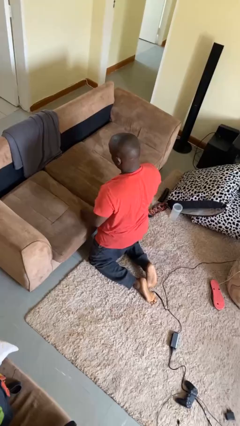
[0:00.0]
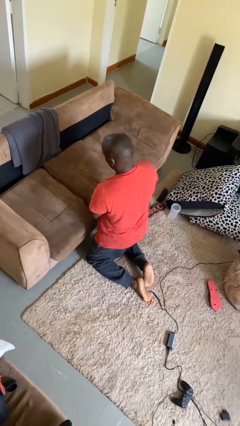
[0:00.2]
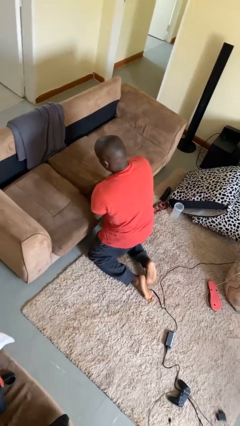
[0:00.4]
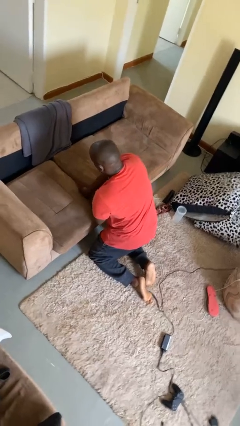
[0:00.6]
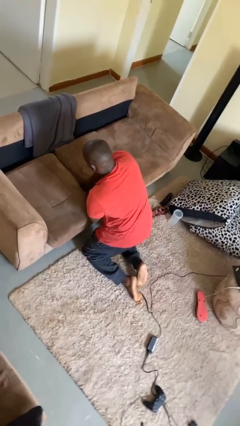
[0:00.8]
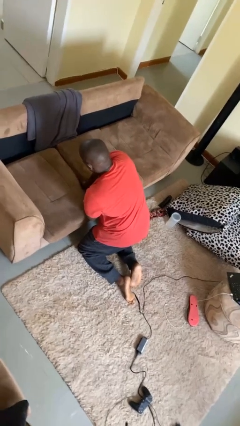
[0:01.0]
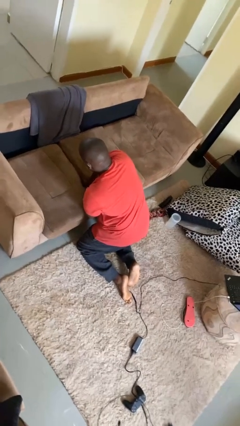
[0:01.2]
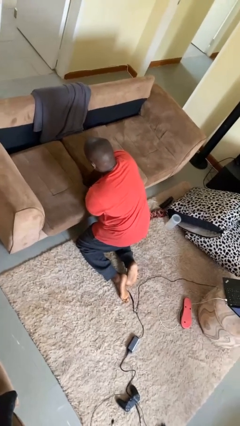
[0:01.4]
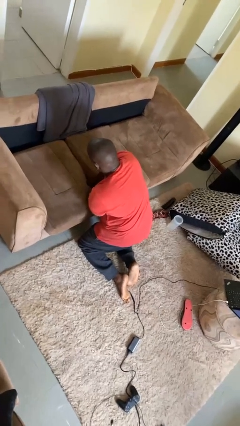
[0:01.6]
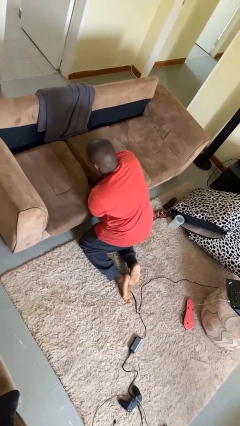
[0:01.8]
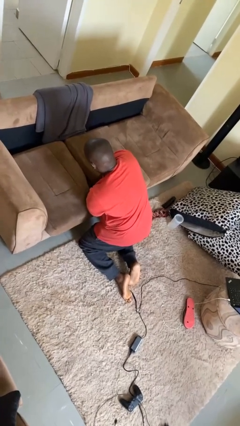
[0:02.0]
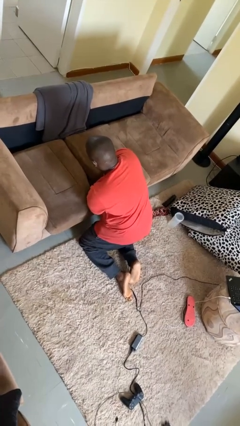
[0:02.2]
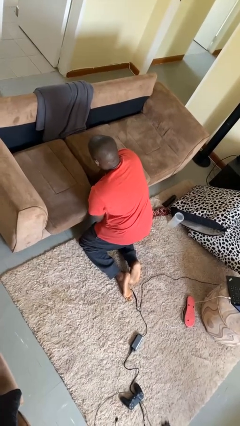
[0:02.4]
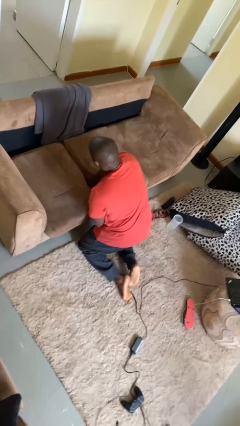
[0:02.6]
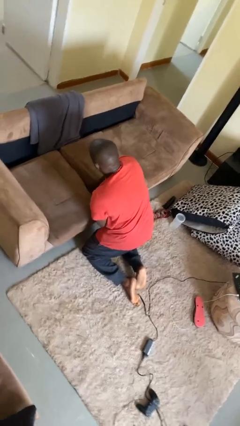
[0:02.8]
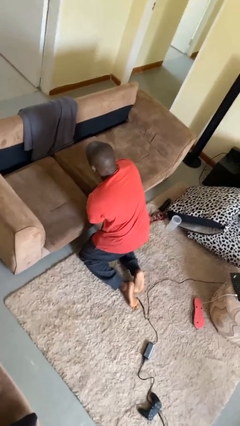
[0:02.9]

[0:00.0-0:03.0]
person searches in couch

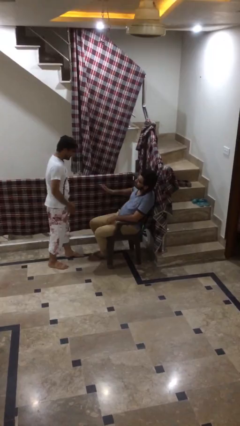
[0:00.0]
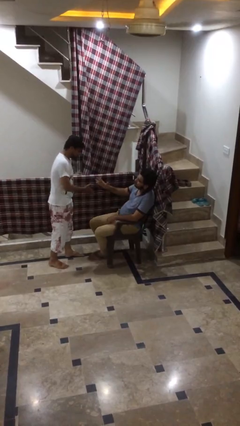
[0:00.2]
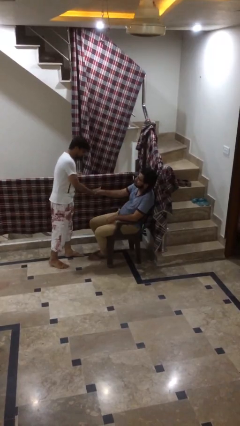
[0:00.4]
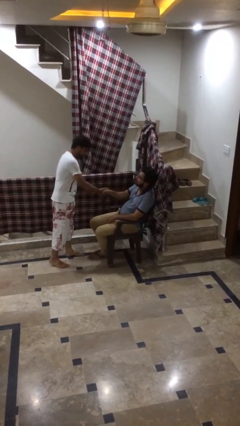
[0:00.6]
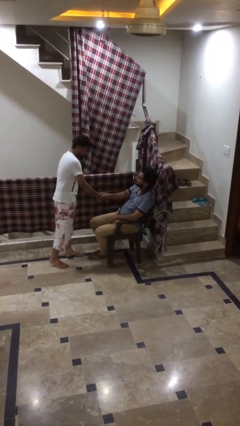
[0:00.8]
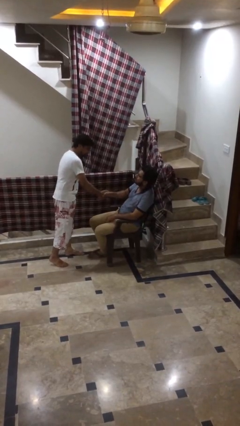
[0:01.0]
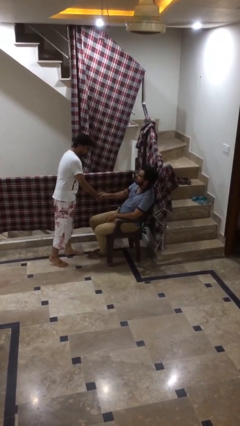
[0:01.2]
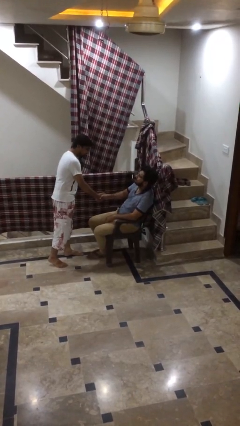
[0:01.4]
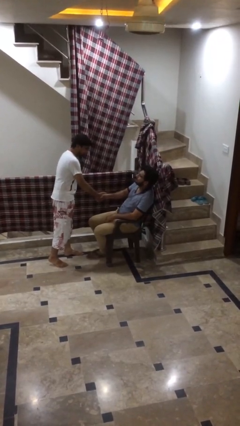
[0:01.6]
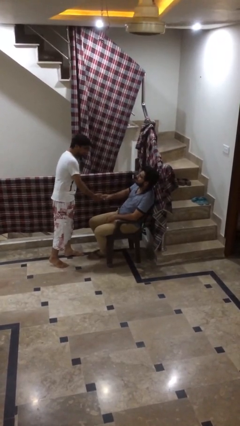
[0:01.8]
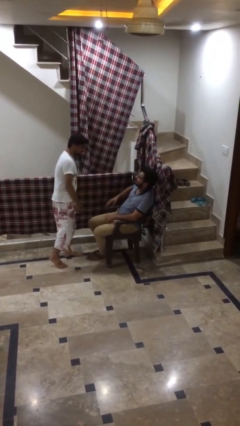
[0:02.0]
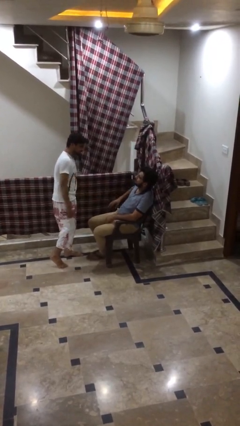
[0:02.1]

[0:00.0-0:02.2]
person shakes hand

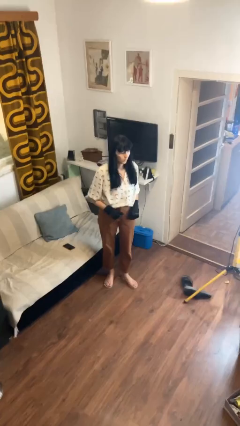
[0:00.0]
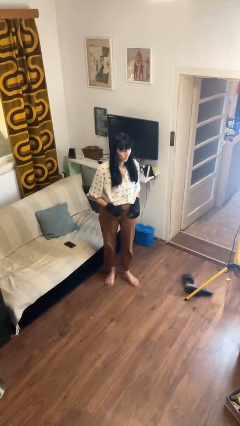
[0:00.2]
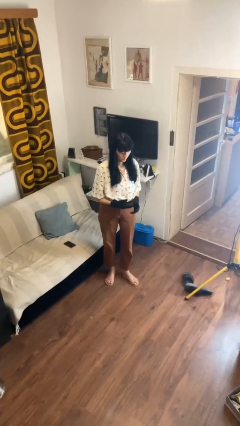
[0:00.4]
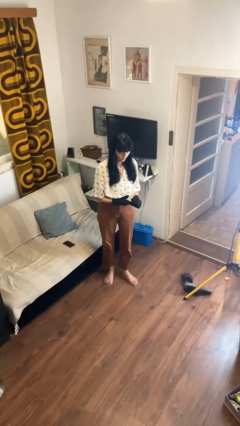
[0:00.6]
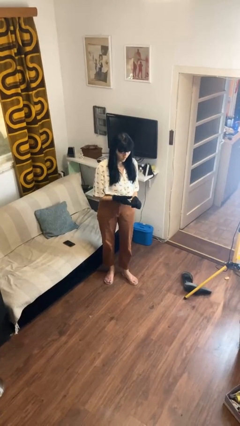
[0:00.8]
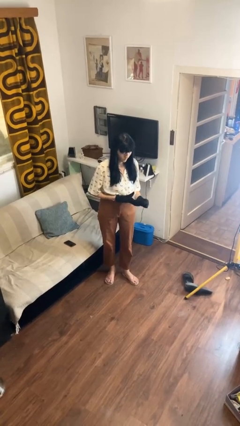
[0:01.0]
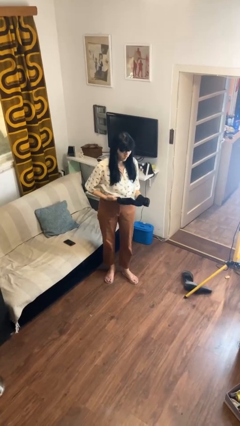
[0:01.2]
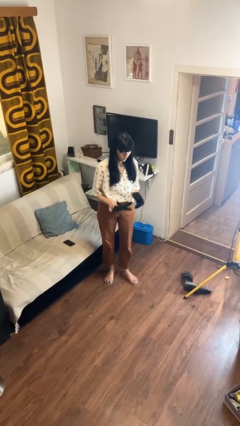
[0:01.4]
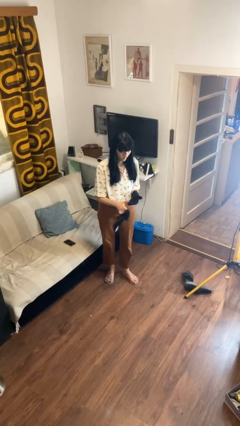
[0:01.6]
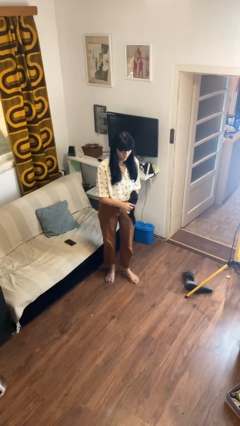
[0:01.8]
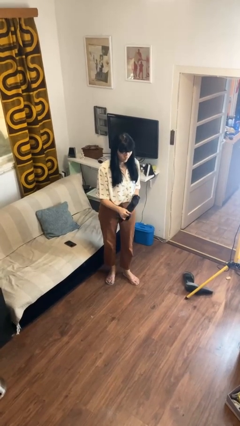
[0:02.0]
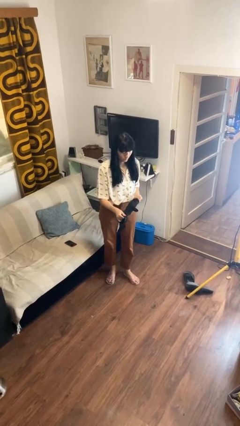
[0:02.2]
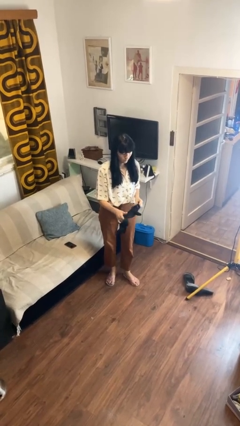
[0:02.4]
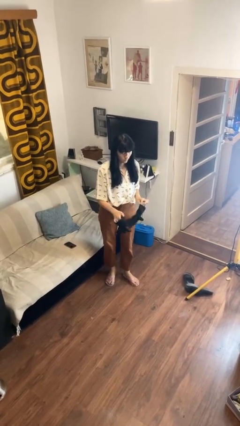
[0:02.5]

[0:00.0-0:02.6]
person takes off gloves

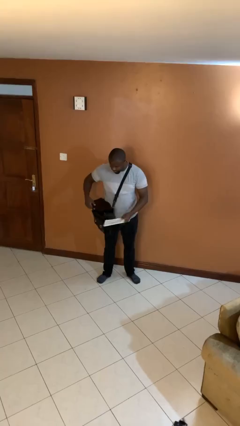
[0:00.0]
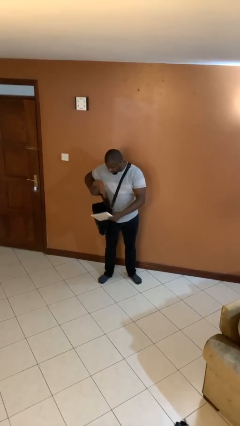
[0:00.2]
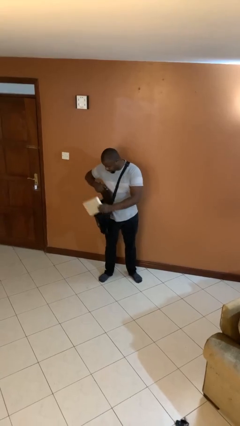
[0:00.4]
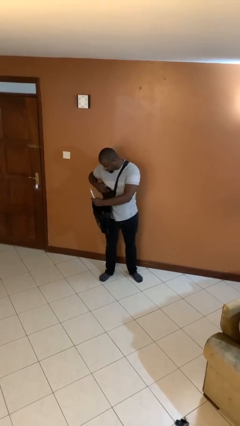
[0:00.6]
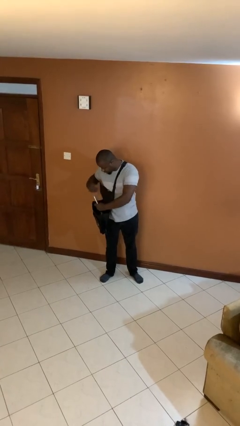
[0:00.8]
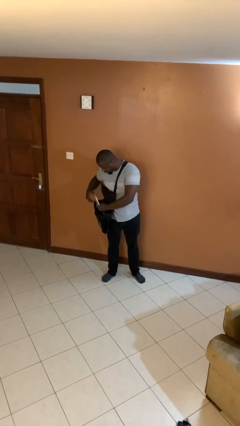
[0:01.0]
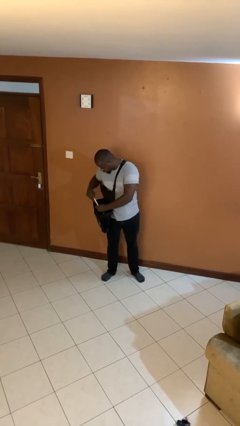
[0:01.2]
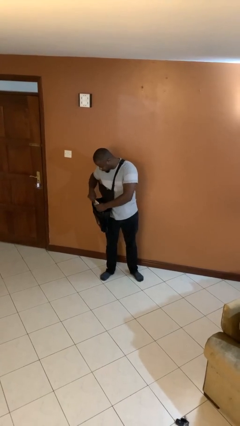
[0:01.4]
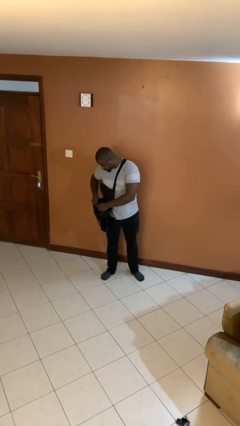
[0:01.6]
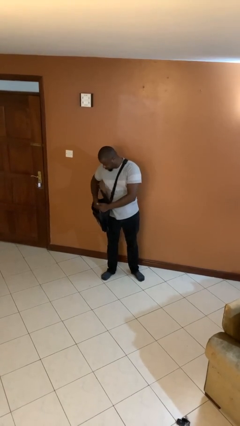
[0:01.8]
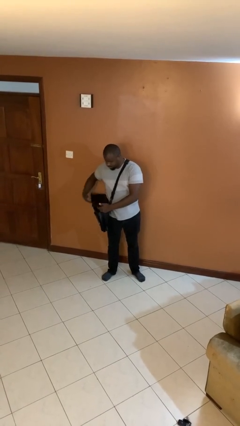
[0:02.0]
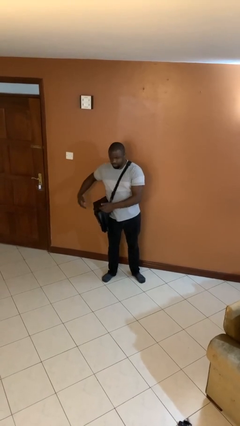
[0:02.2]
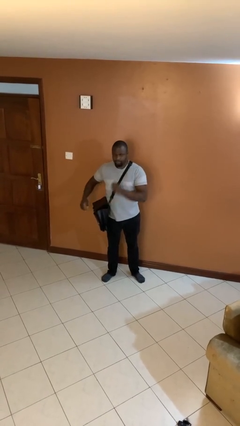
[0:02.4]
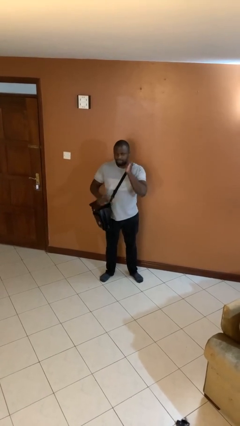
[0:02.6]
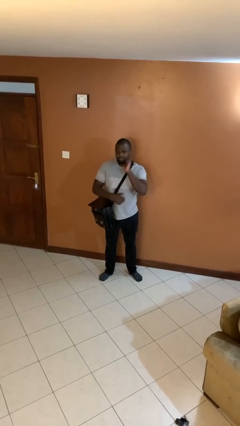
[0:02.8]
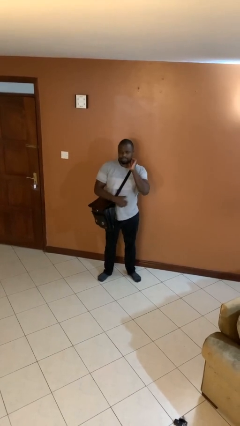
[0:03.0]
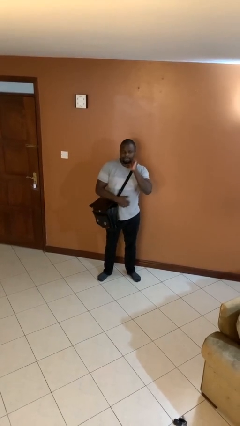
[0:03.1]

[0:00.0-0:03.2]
person puts object into purse

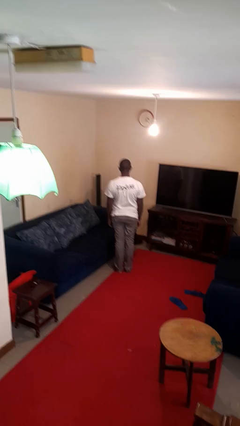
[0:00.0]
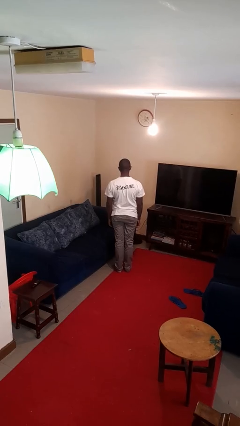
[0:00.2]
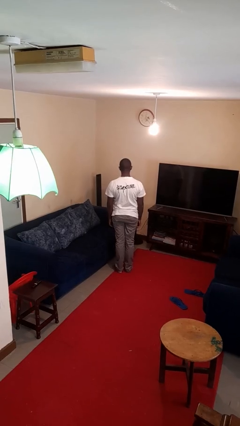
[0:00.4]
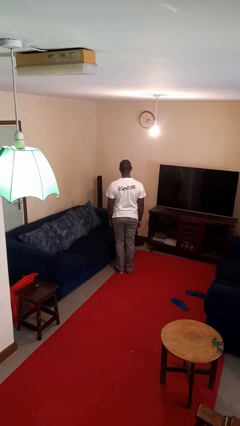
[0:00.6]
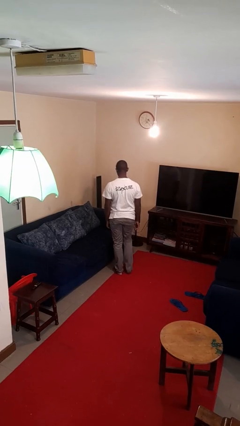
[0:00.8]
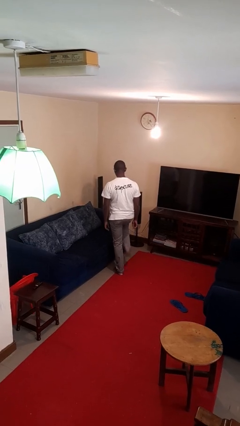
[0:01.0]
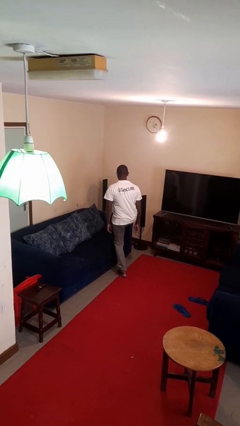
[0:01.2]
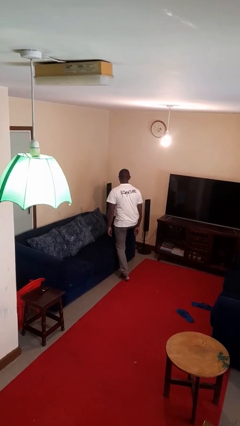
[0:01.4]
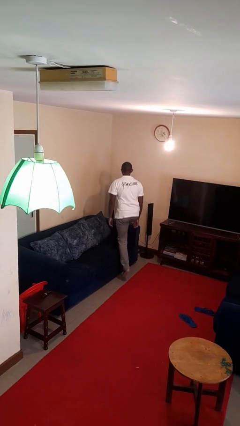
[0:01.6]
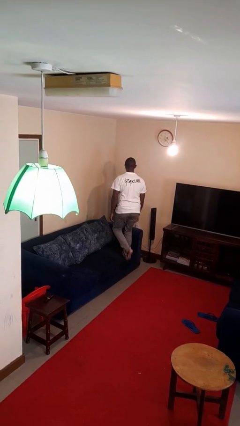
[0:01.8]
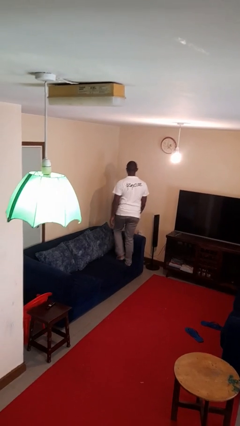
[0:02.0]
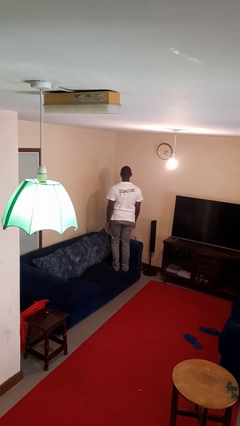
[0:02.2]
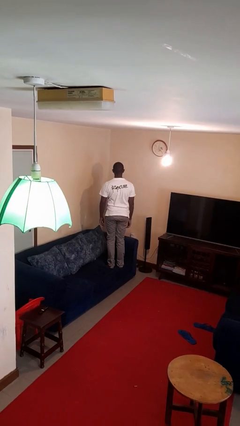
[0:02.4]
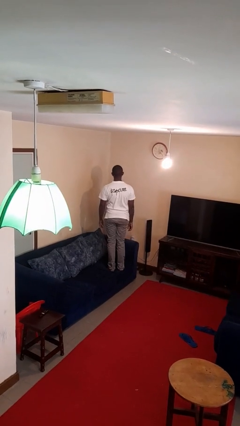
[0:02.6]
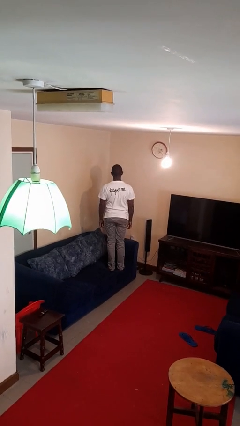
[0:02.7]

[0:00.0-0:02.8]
person climbs on couch

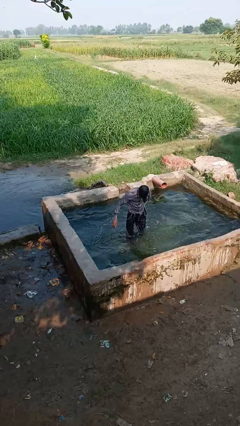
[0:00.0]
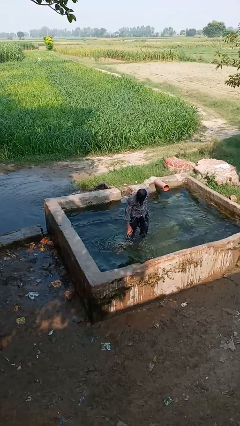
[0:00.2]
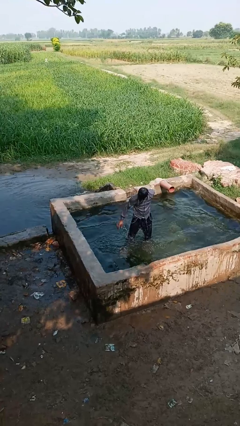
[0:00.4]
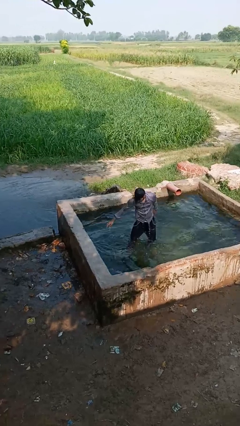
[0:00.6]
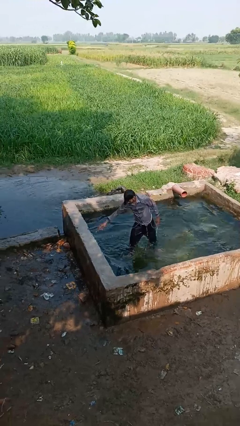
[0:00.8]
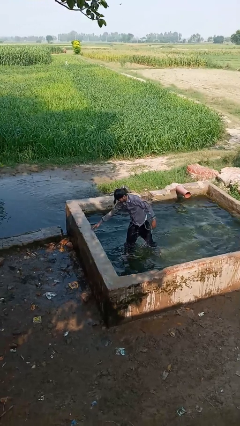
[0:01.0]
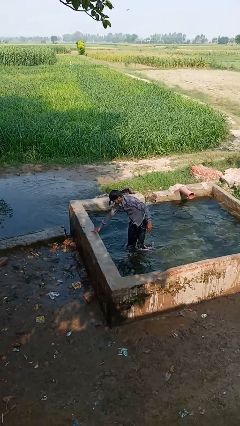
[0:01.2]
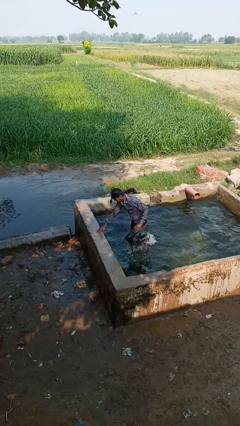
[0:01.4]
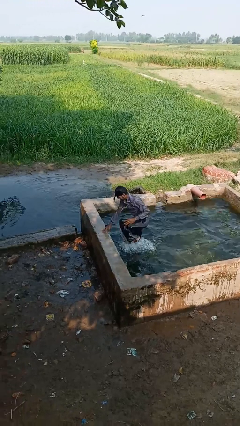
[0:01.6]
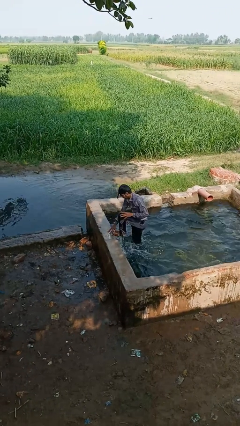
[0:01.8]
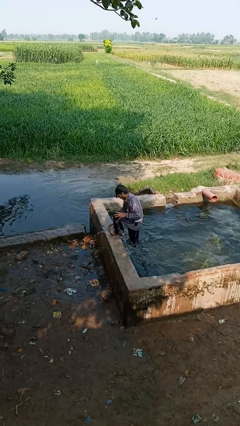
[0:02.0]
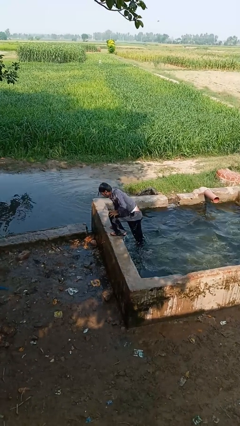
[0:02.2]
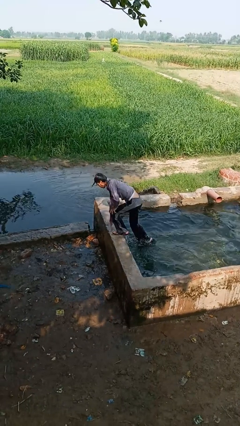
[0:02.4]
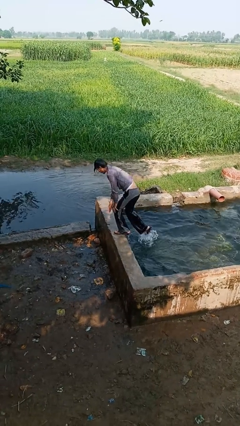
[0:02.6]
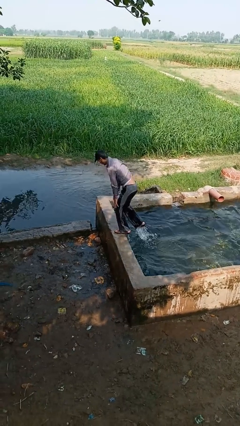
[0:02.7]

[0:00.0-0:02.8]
person exits pool

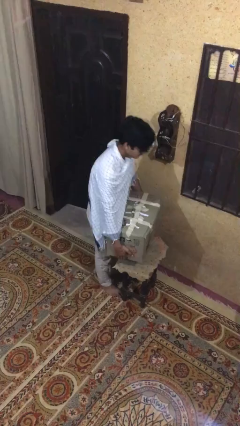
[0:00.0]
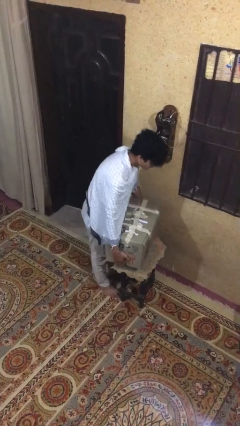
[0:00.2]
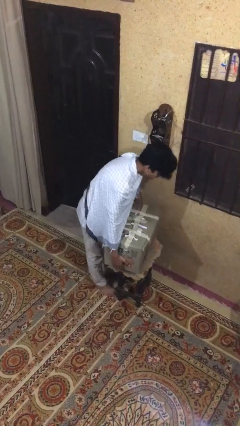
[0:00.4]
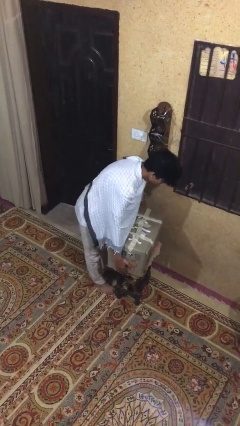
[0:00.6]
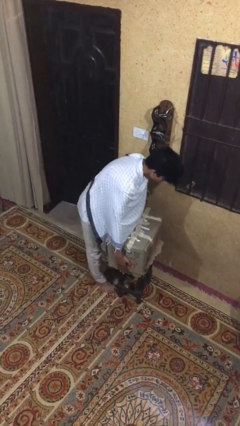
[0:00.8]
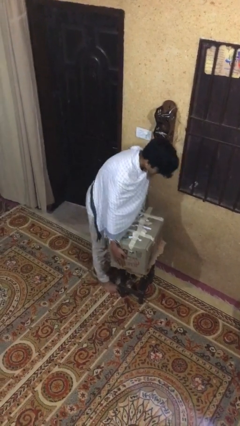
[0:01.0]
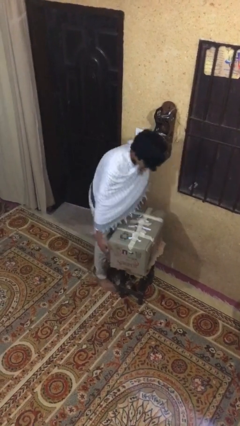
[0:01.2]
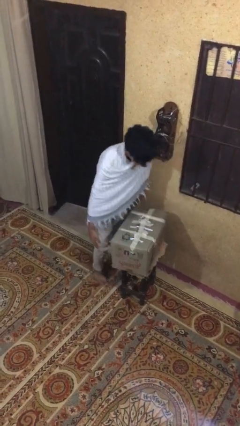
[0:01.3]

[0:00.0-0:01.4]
person puts down object on table
